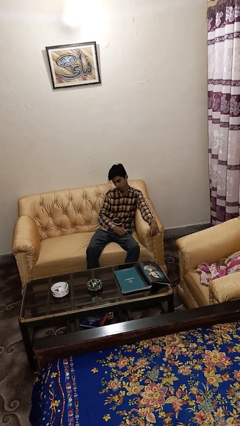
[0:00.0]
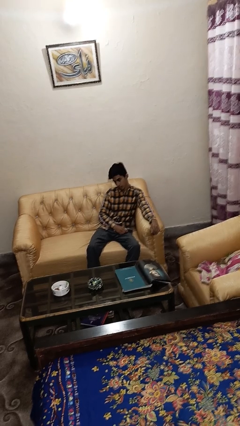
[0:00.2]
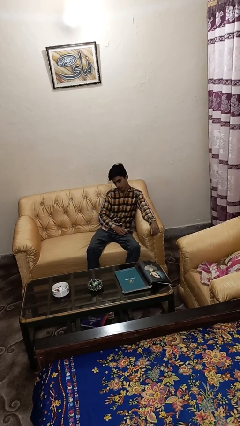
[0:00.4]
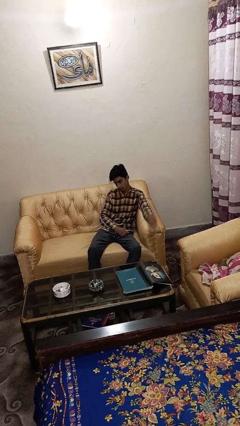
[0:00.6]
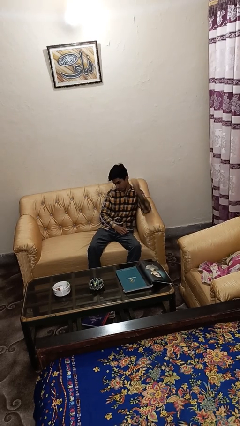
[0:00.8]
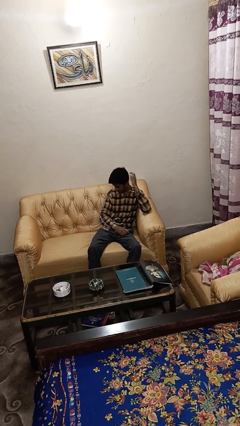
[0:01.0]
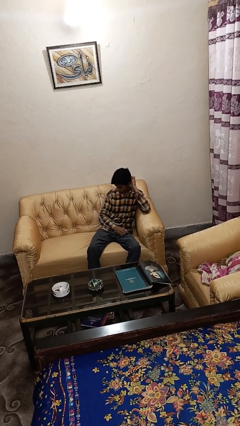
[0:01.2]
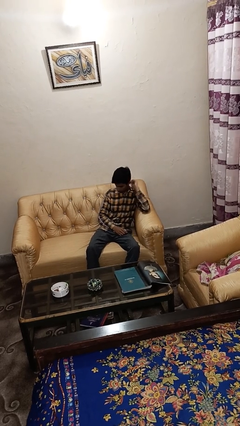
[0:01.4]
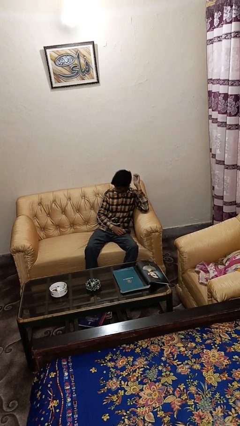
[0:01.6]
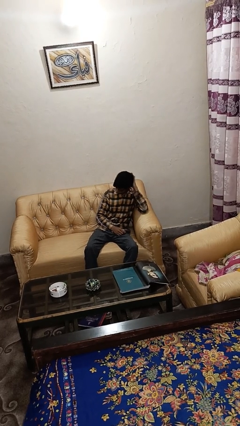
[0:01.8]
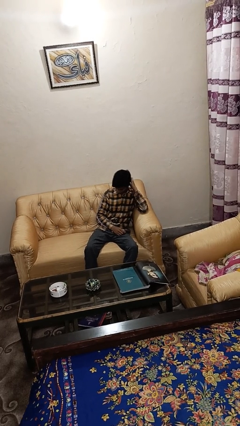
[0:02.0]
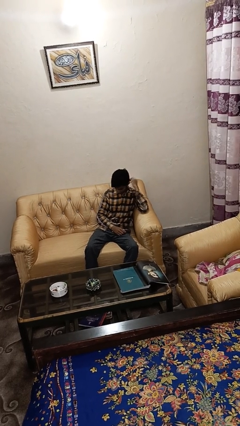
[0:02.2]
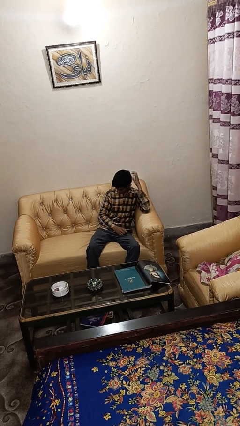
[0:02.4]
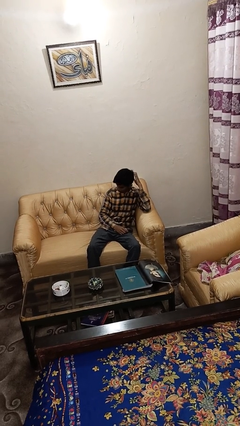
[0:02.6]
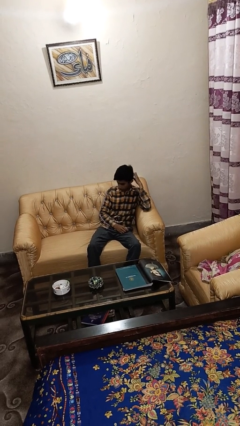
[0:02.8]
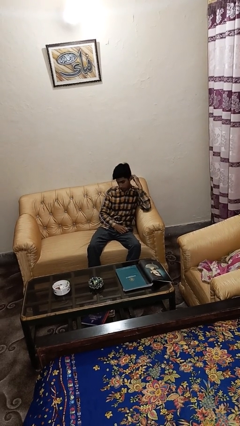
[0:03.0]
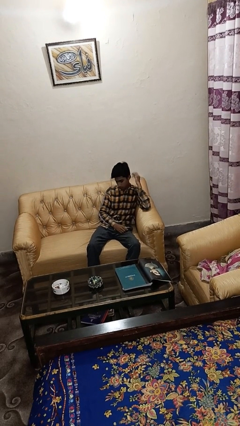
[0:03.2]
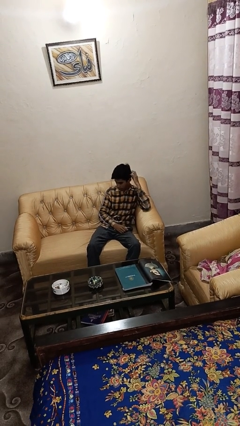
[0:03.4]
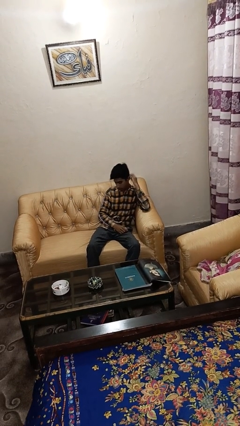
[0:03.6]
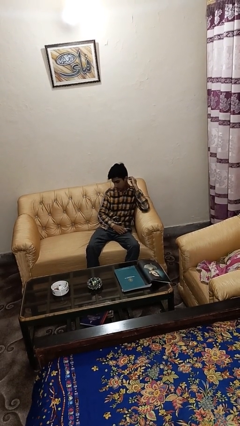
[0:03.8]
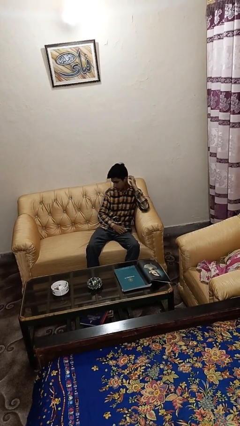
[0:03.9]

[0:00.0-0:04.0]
person strokes hair

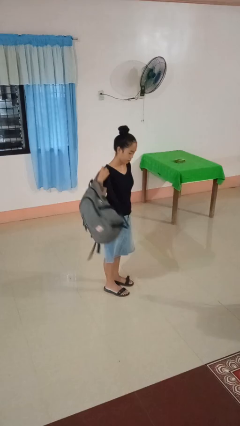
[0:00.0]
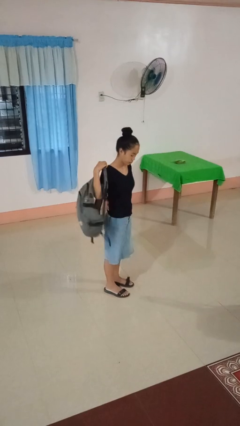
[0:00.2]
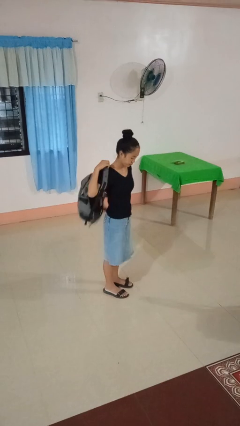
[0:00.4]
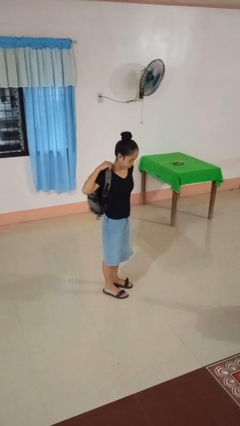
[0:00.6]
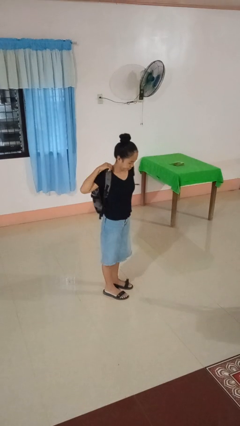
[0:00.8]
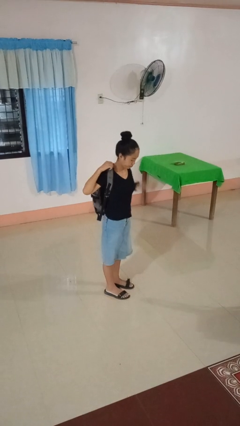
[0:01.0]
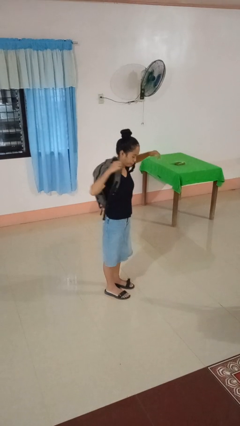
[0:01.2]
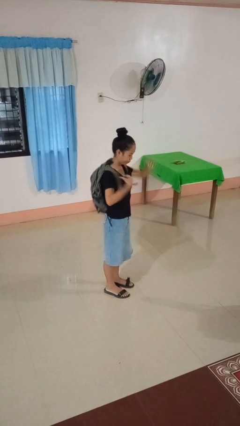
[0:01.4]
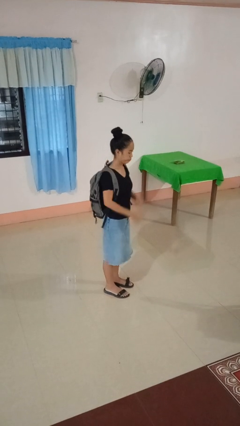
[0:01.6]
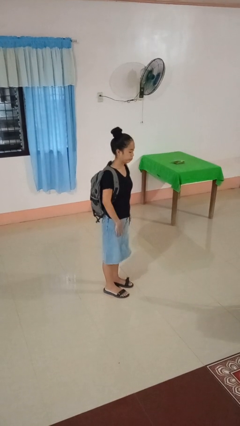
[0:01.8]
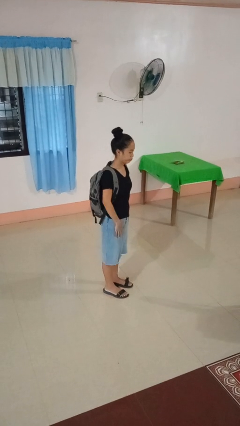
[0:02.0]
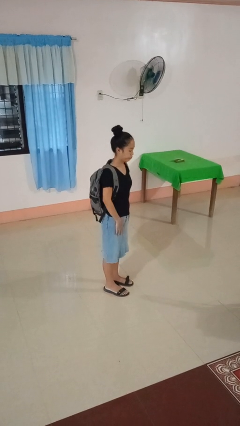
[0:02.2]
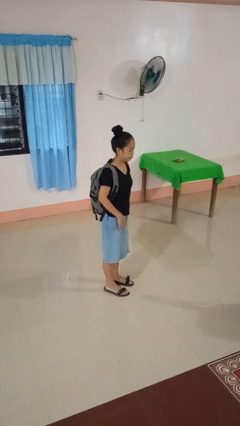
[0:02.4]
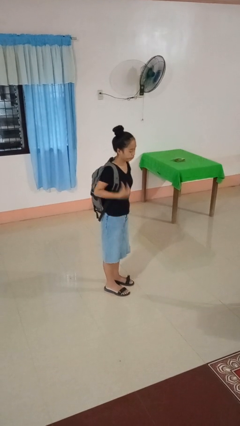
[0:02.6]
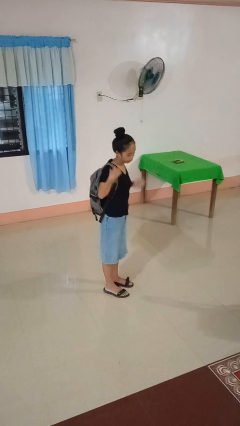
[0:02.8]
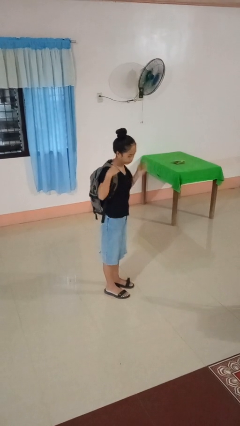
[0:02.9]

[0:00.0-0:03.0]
person puts on backpack

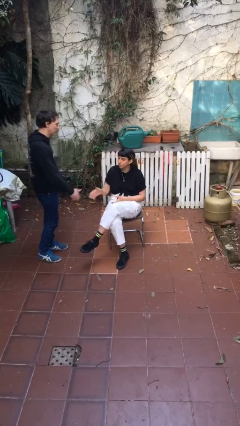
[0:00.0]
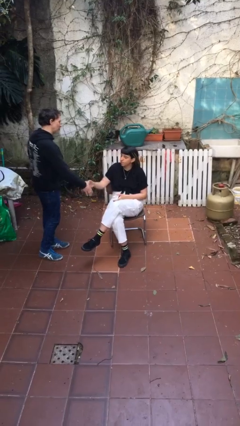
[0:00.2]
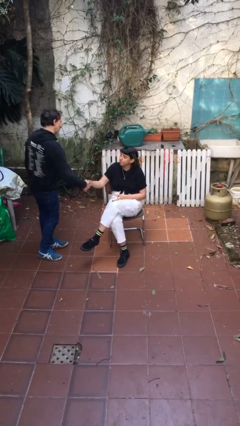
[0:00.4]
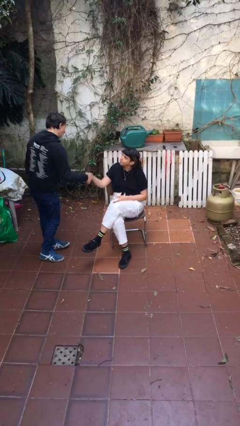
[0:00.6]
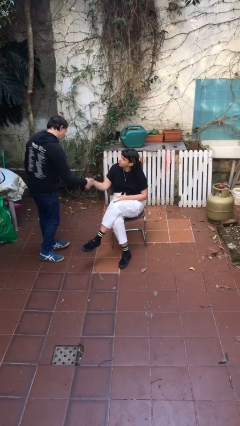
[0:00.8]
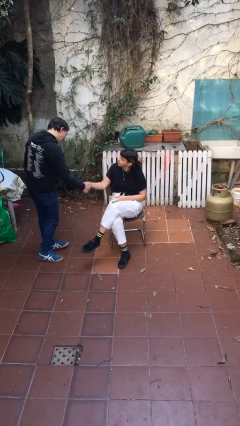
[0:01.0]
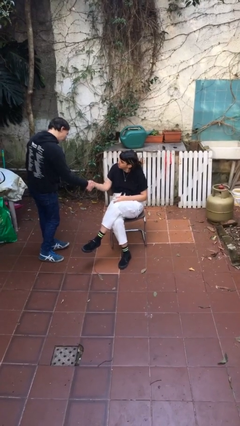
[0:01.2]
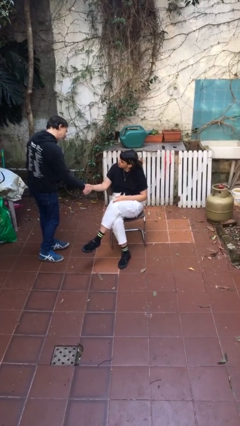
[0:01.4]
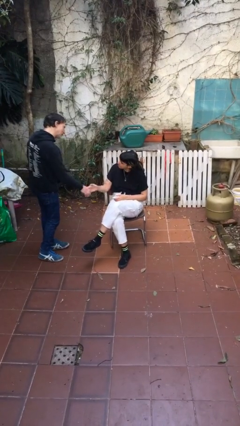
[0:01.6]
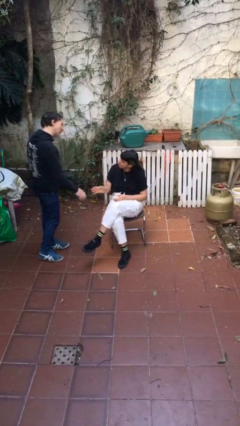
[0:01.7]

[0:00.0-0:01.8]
person shakes hand

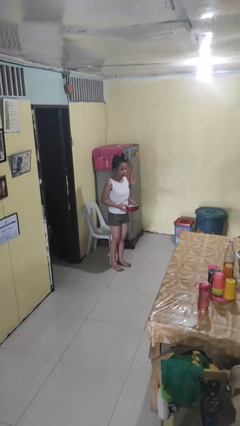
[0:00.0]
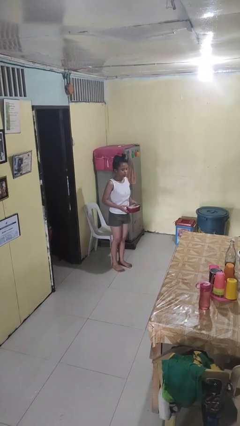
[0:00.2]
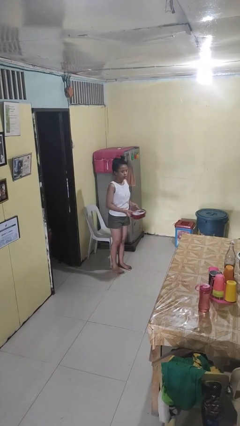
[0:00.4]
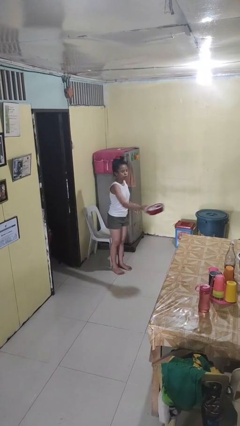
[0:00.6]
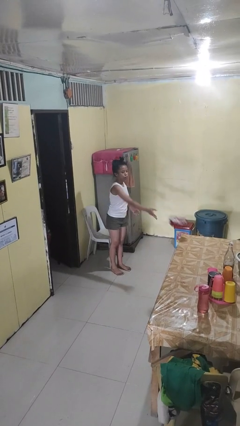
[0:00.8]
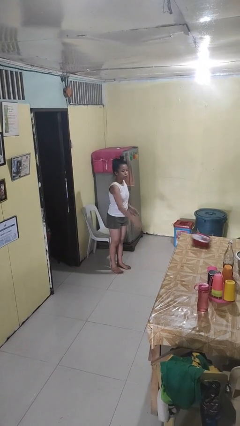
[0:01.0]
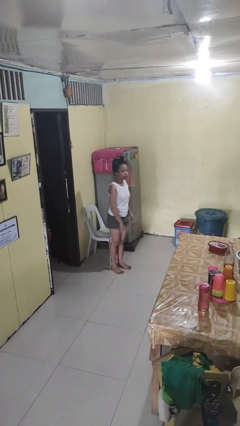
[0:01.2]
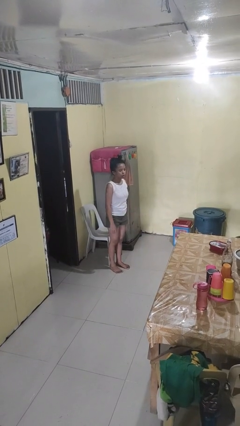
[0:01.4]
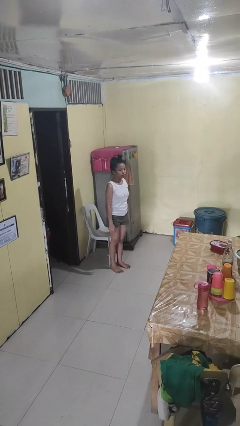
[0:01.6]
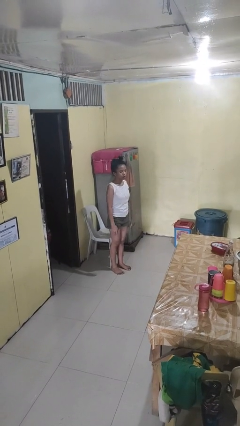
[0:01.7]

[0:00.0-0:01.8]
person throws object on table

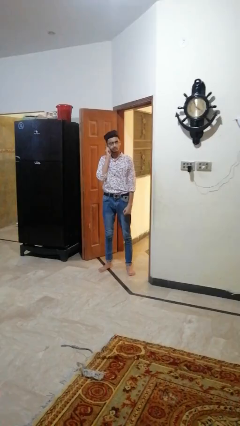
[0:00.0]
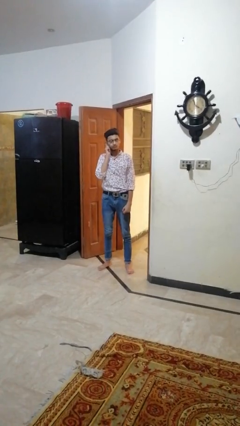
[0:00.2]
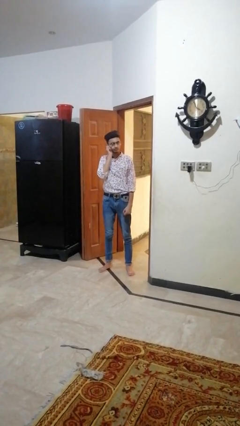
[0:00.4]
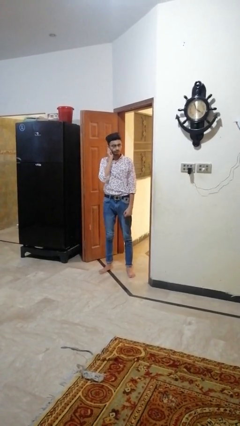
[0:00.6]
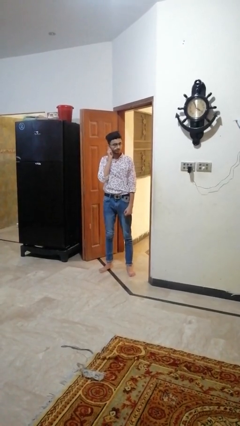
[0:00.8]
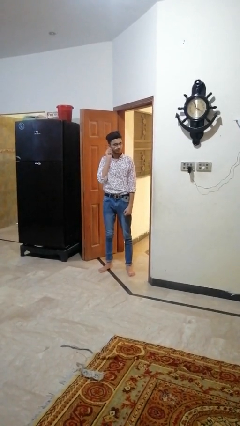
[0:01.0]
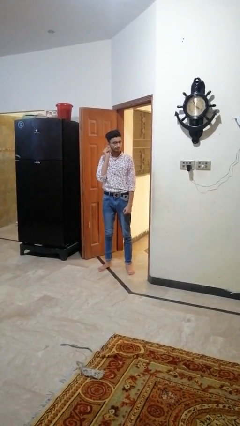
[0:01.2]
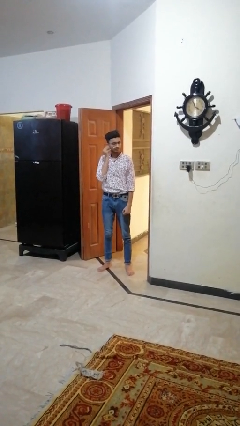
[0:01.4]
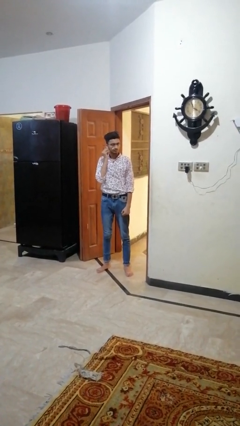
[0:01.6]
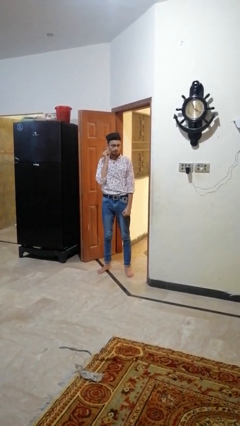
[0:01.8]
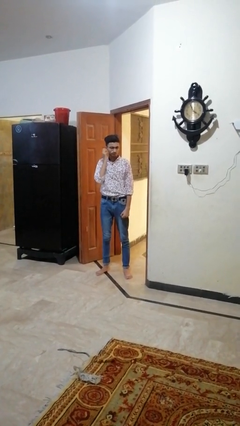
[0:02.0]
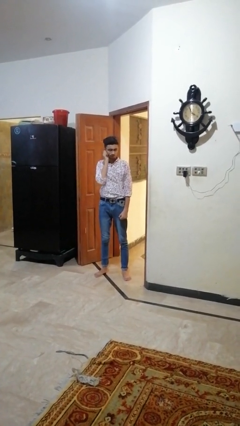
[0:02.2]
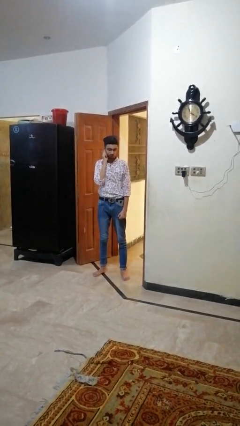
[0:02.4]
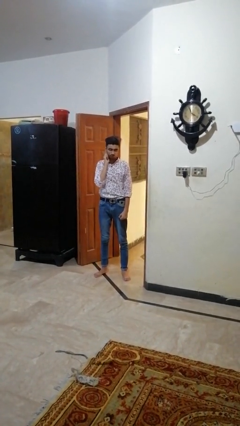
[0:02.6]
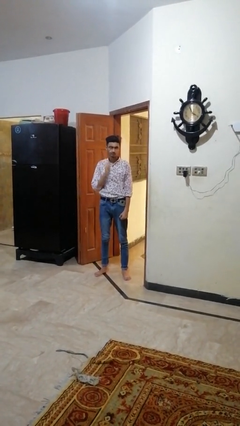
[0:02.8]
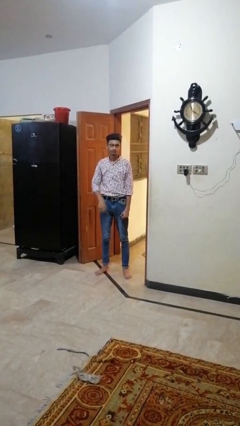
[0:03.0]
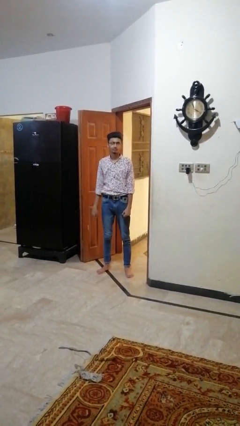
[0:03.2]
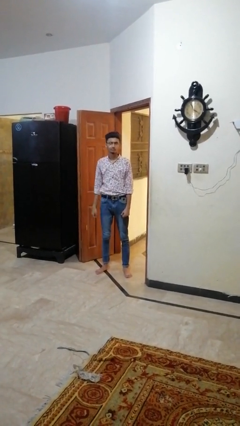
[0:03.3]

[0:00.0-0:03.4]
person touches earlobe

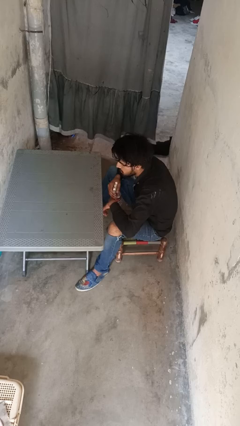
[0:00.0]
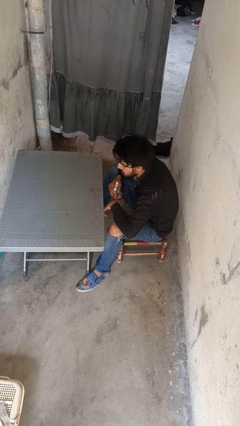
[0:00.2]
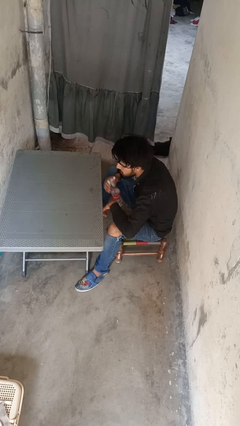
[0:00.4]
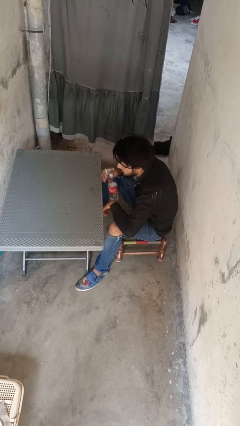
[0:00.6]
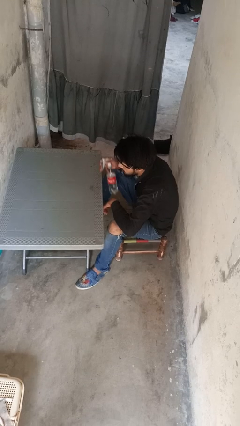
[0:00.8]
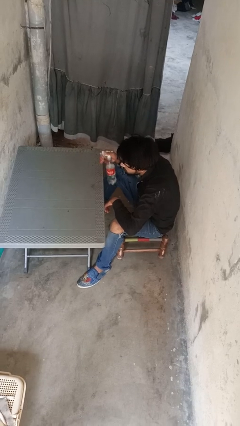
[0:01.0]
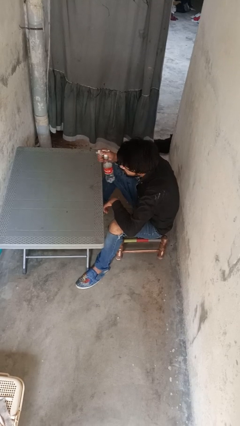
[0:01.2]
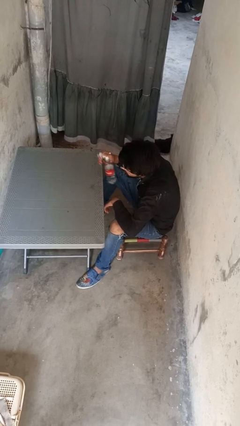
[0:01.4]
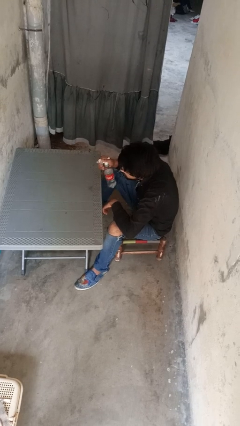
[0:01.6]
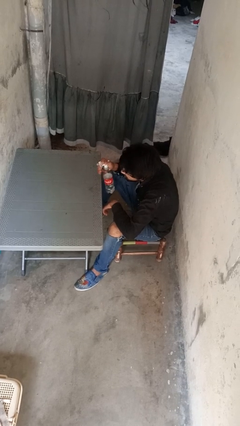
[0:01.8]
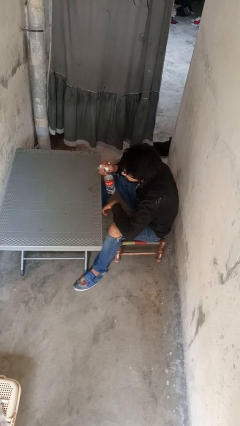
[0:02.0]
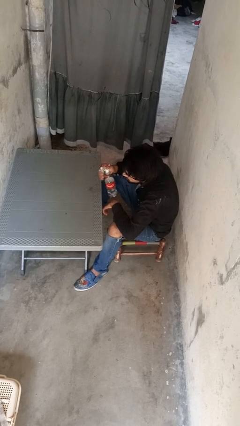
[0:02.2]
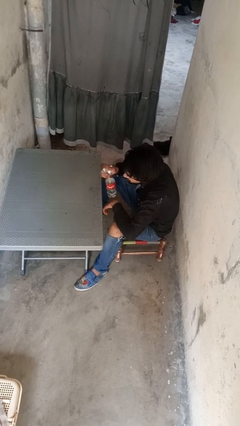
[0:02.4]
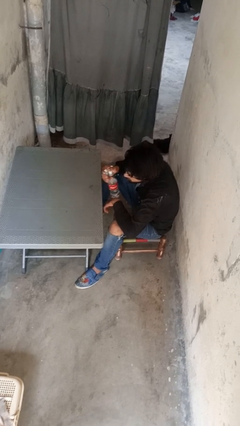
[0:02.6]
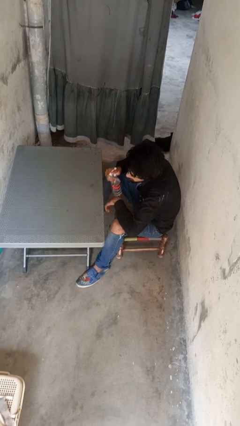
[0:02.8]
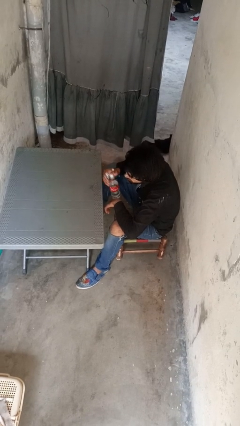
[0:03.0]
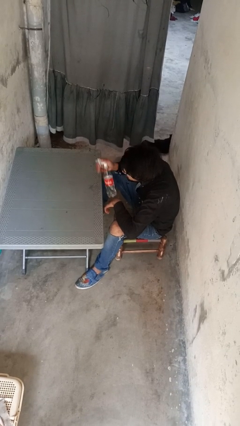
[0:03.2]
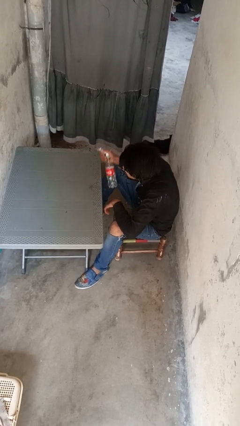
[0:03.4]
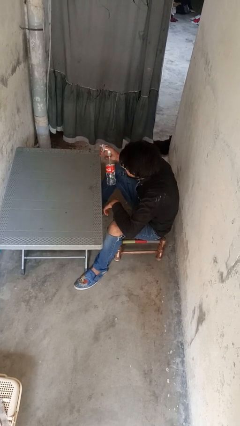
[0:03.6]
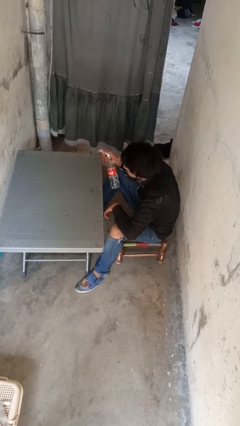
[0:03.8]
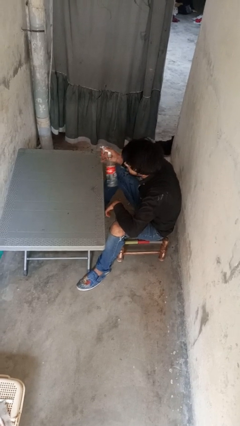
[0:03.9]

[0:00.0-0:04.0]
person sprays from bottle
